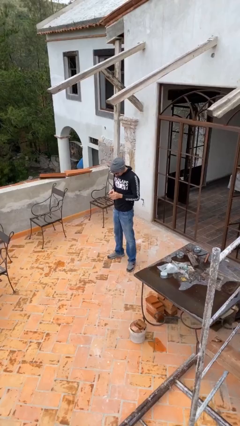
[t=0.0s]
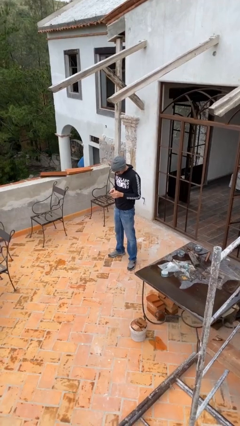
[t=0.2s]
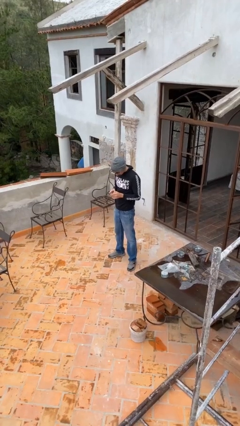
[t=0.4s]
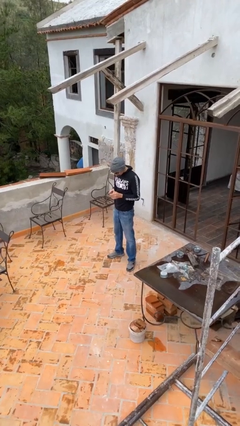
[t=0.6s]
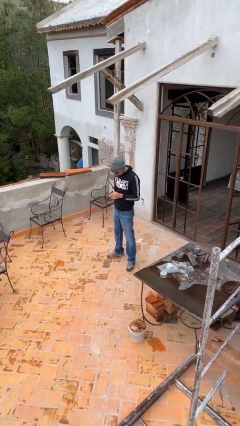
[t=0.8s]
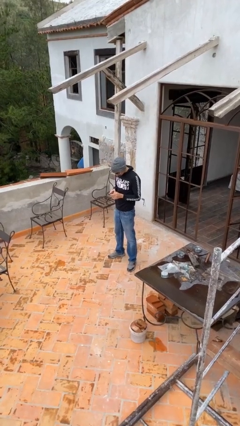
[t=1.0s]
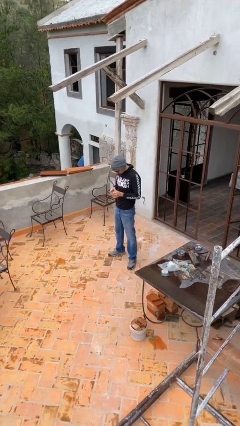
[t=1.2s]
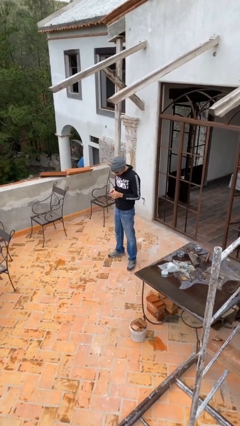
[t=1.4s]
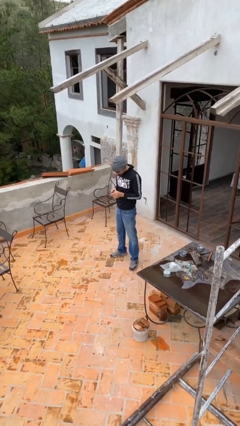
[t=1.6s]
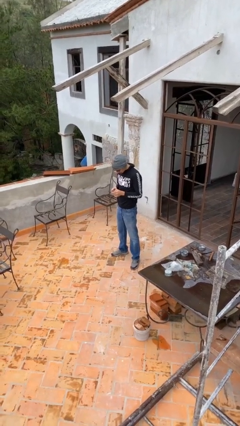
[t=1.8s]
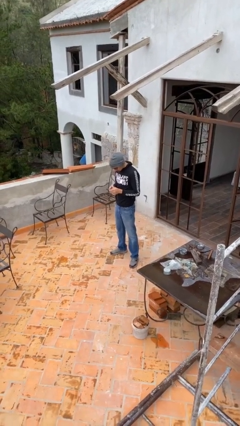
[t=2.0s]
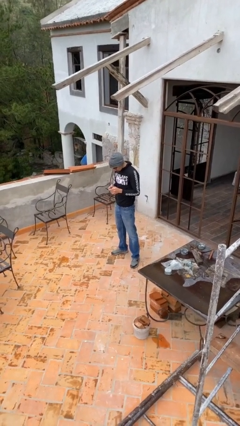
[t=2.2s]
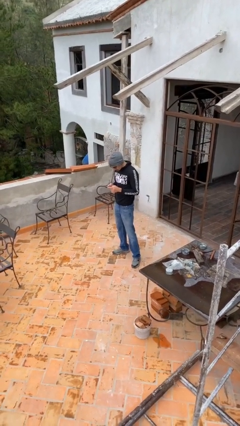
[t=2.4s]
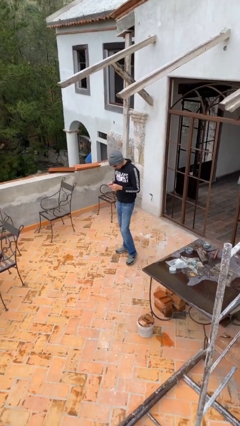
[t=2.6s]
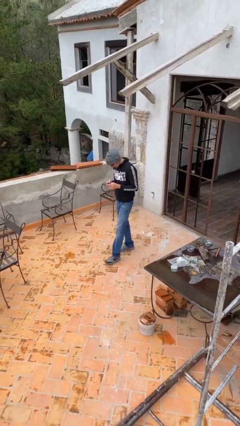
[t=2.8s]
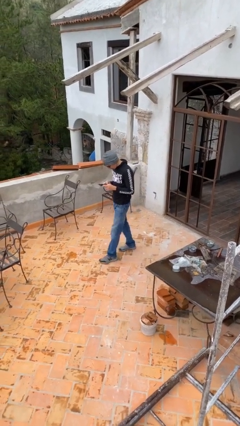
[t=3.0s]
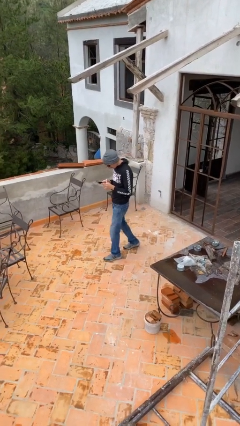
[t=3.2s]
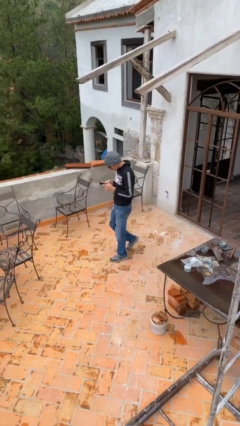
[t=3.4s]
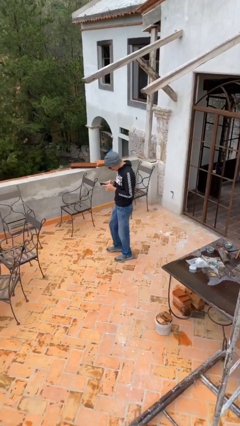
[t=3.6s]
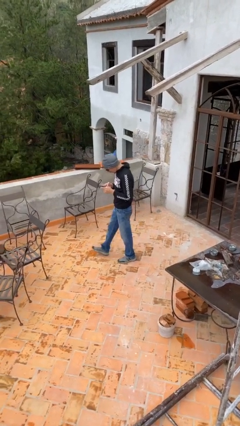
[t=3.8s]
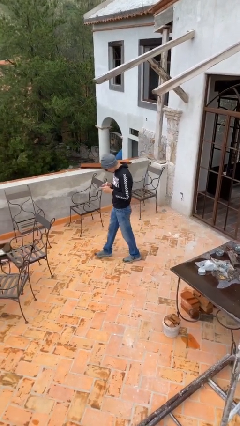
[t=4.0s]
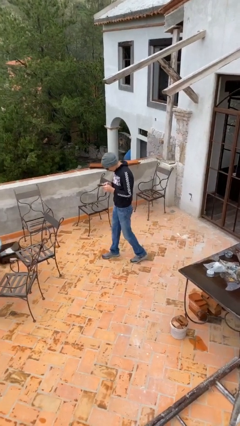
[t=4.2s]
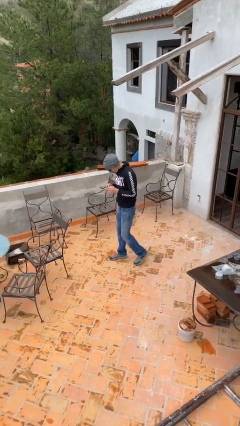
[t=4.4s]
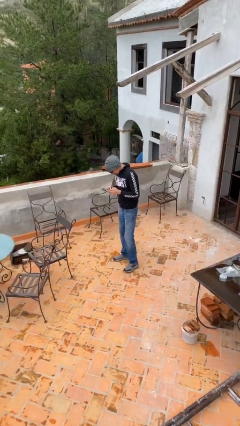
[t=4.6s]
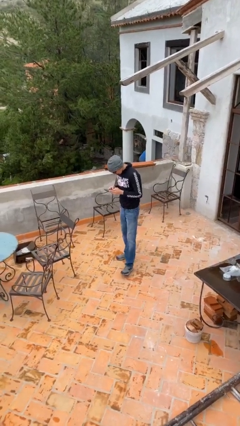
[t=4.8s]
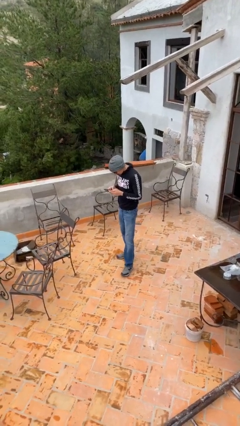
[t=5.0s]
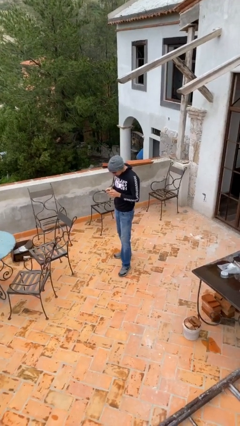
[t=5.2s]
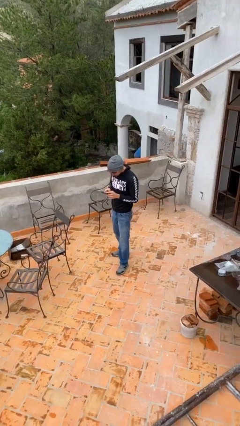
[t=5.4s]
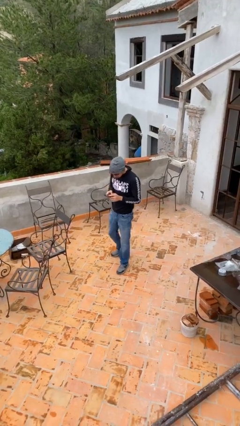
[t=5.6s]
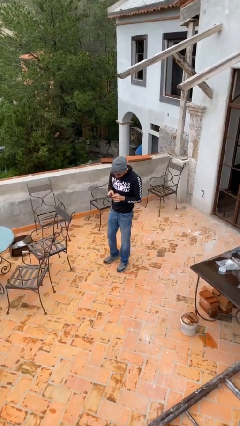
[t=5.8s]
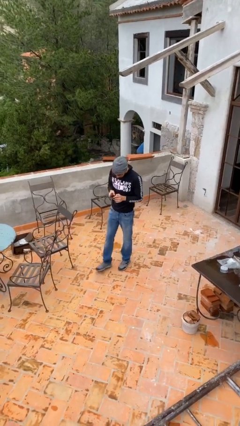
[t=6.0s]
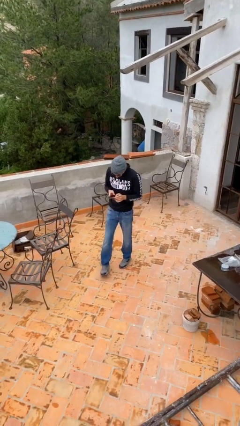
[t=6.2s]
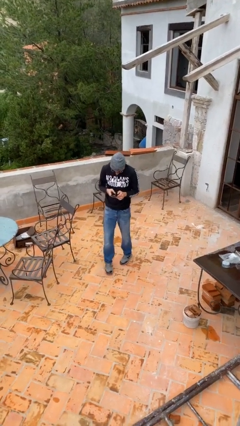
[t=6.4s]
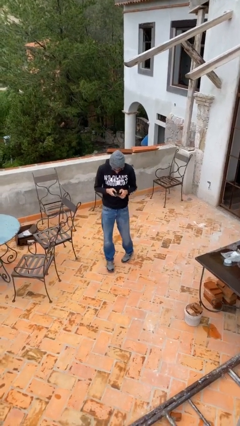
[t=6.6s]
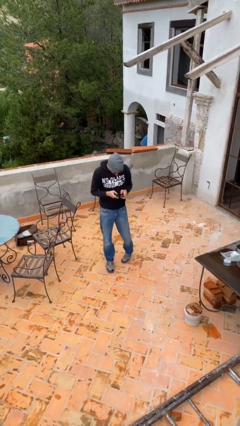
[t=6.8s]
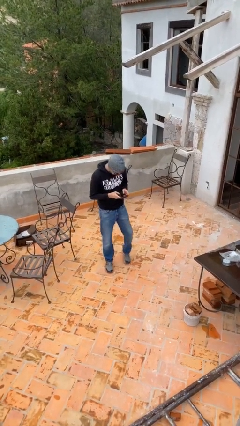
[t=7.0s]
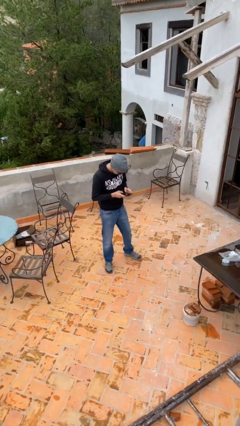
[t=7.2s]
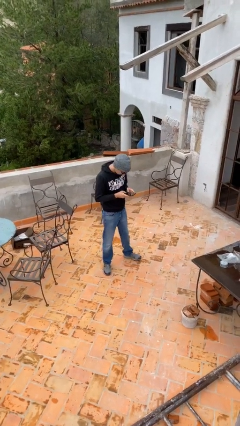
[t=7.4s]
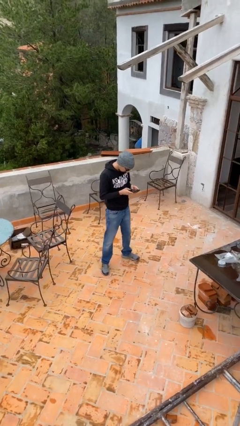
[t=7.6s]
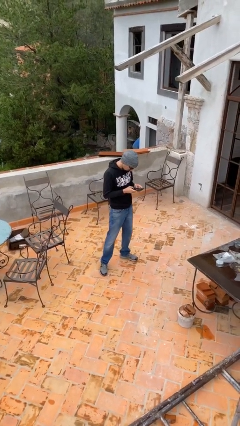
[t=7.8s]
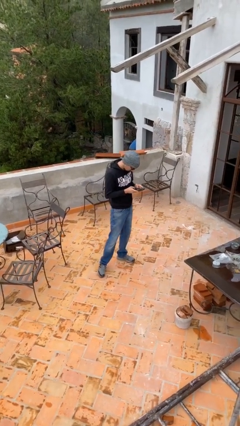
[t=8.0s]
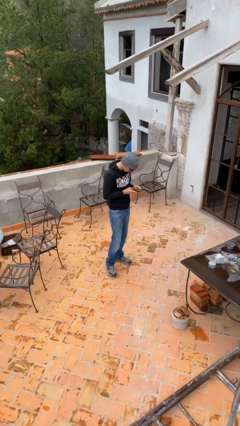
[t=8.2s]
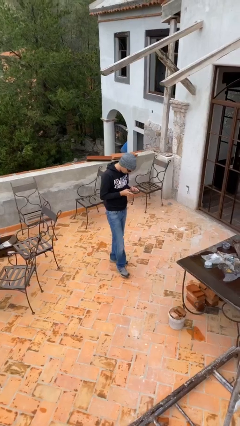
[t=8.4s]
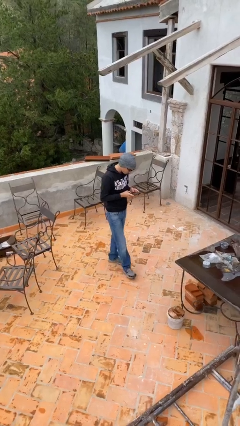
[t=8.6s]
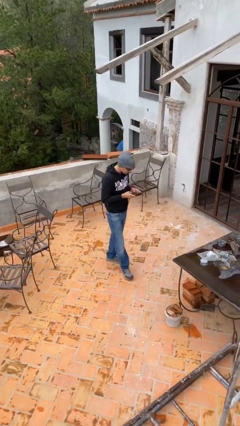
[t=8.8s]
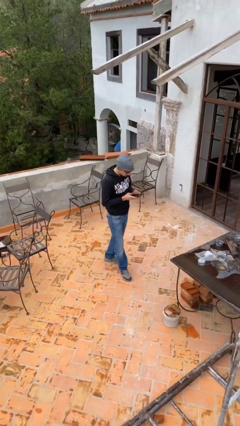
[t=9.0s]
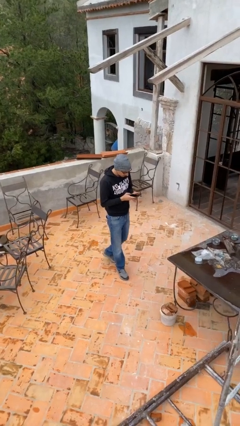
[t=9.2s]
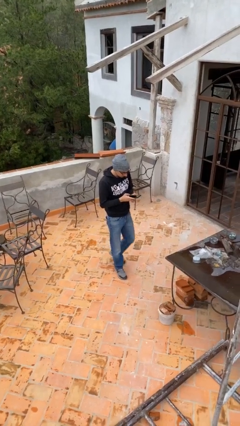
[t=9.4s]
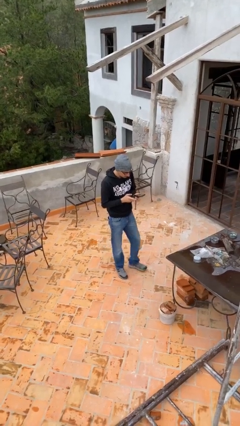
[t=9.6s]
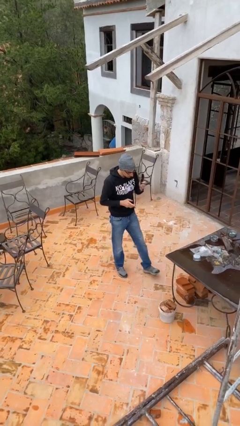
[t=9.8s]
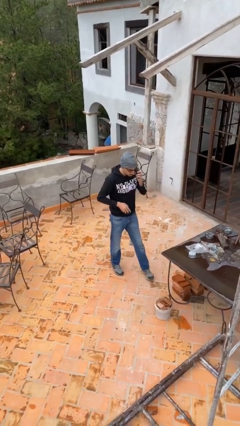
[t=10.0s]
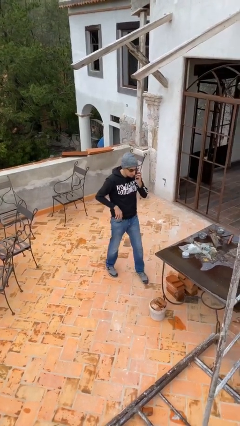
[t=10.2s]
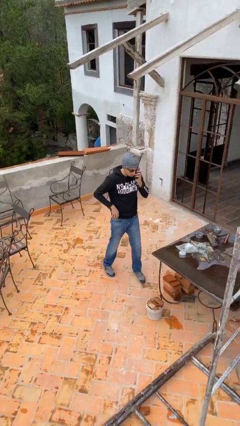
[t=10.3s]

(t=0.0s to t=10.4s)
person texts on phone

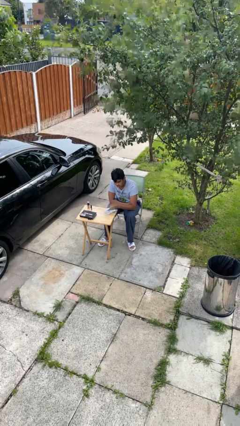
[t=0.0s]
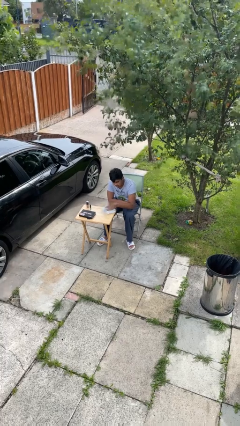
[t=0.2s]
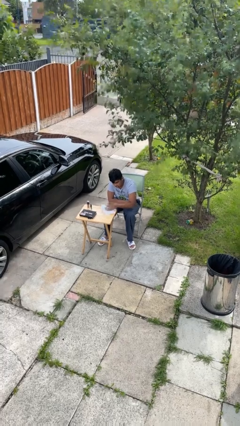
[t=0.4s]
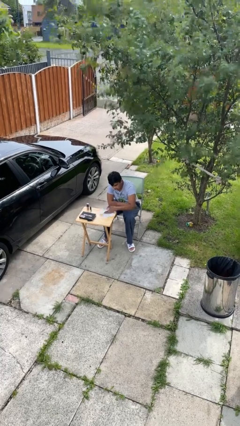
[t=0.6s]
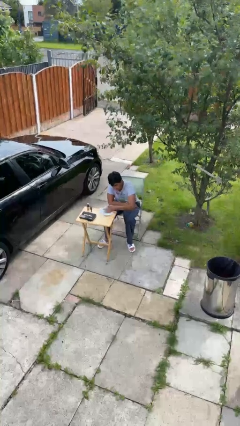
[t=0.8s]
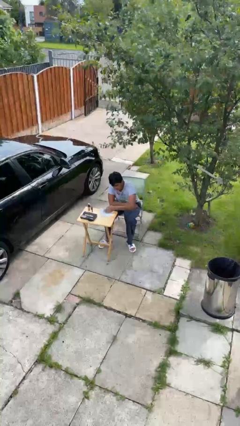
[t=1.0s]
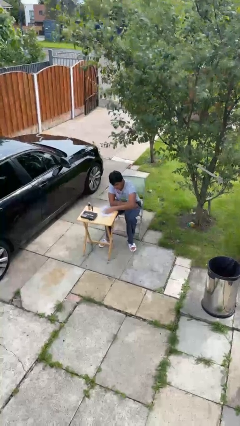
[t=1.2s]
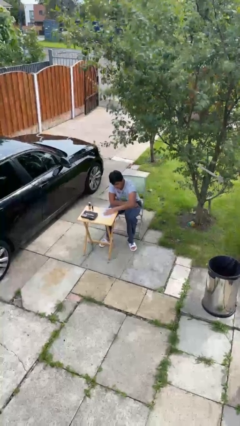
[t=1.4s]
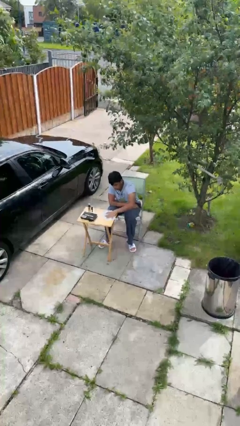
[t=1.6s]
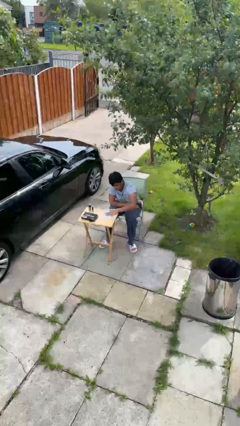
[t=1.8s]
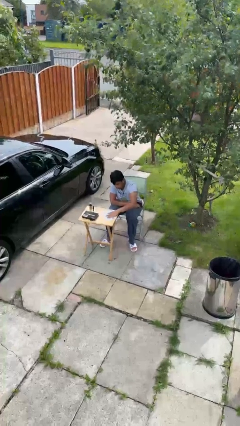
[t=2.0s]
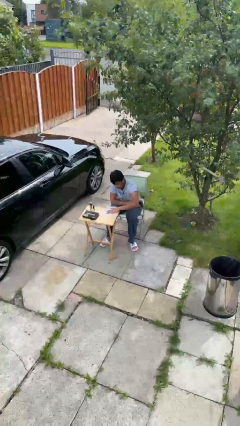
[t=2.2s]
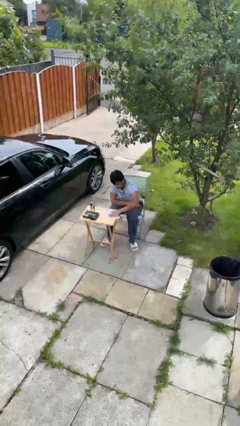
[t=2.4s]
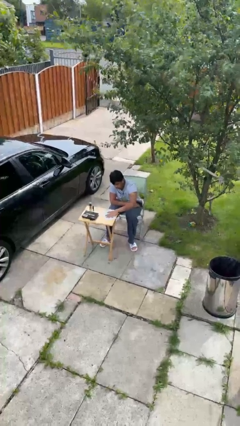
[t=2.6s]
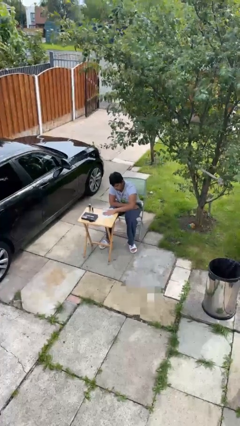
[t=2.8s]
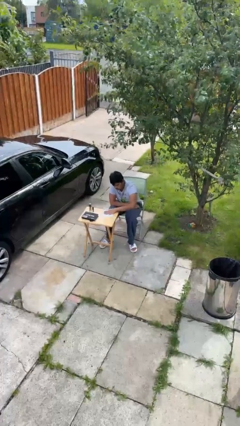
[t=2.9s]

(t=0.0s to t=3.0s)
person cleans table with rag

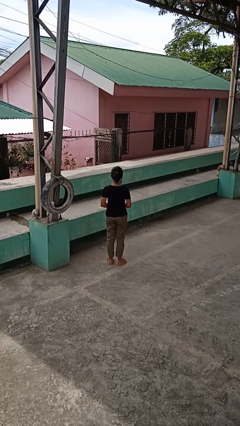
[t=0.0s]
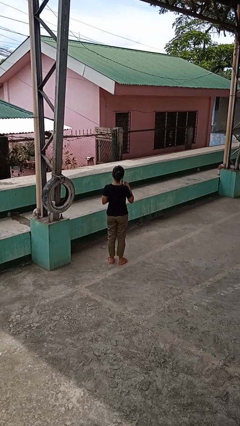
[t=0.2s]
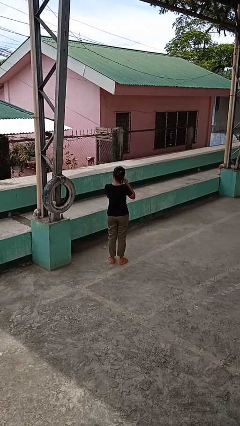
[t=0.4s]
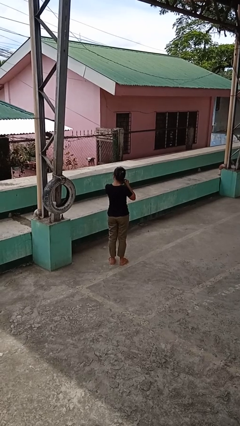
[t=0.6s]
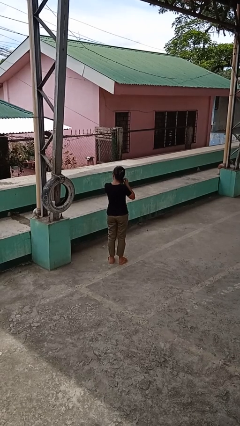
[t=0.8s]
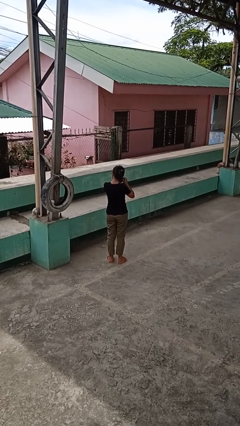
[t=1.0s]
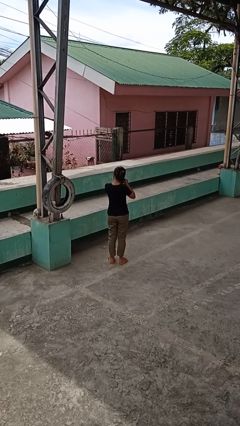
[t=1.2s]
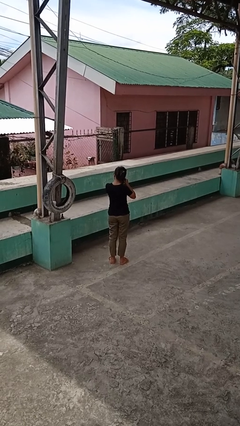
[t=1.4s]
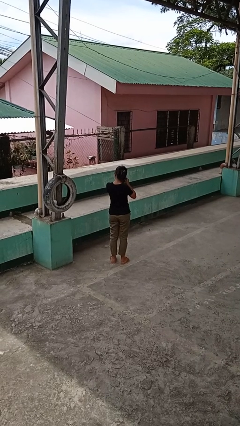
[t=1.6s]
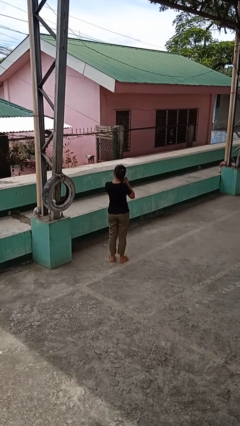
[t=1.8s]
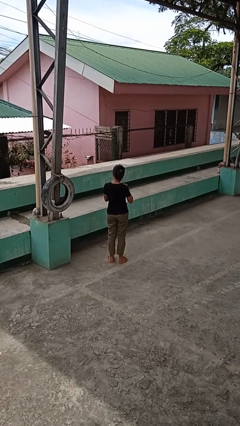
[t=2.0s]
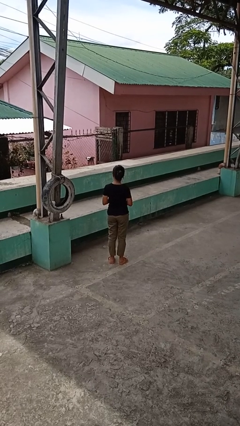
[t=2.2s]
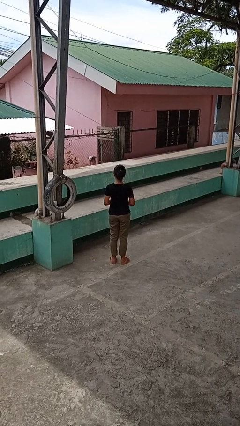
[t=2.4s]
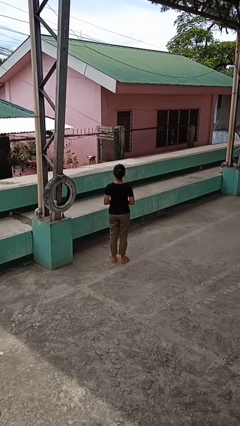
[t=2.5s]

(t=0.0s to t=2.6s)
person takes off earrings

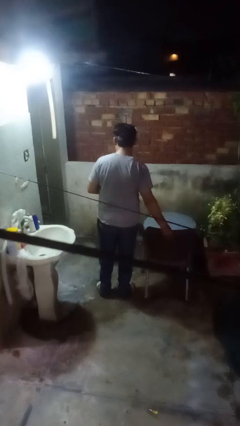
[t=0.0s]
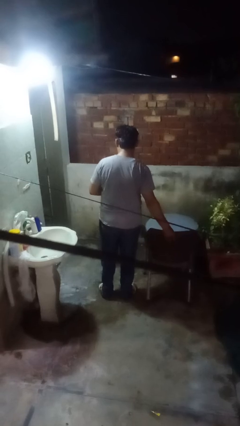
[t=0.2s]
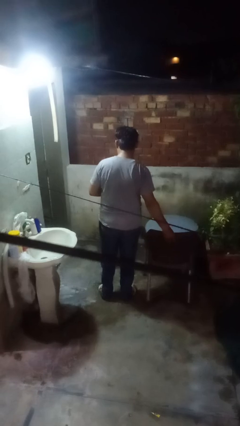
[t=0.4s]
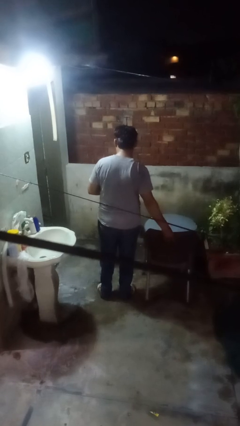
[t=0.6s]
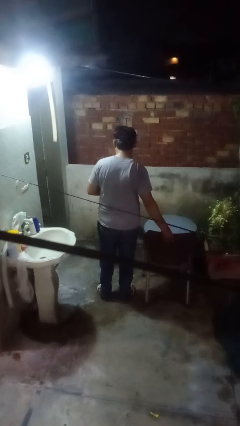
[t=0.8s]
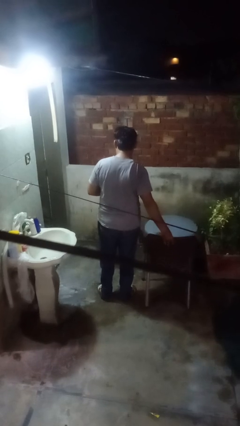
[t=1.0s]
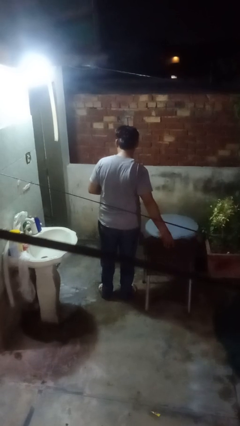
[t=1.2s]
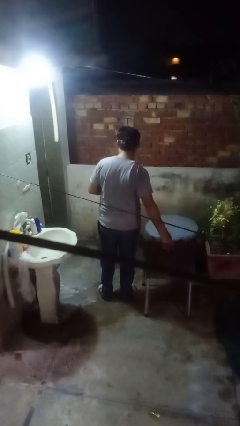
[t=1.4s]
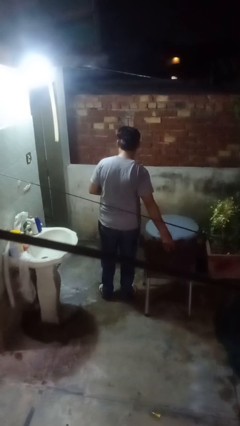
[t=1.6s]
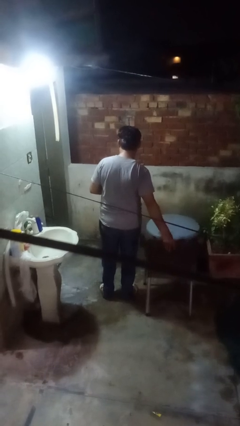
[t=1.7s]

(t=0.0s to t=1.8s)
person pulls out chair

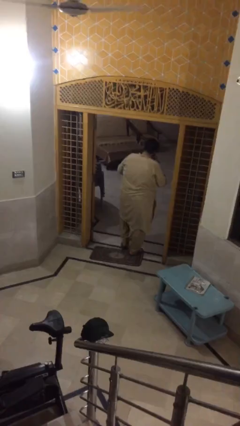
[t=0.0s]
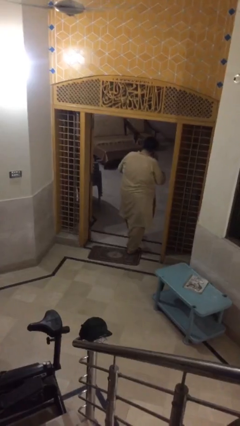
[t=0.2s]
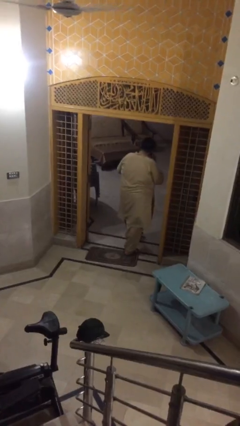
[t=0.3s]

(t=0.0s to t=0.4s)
person exits scene through structure
